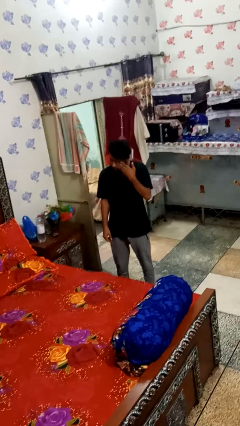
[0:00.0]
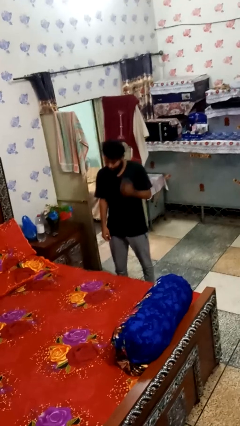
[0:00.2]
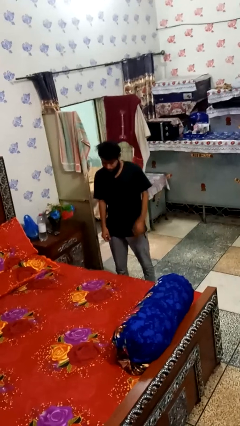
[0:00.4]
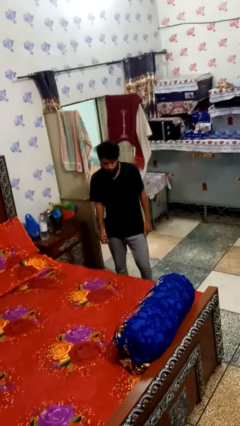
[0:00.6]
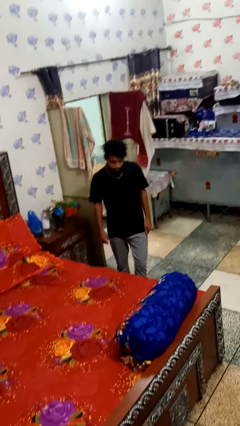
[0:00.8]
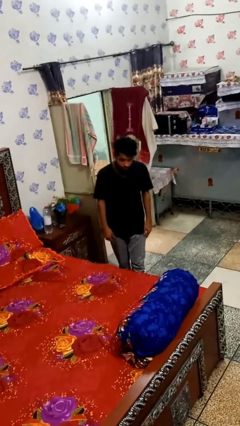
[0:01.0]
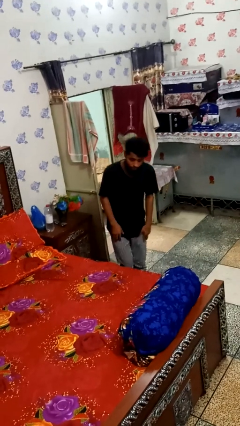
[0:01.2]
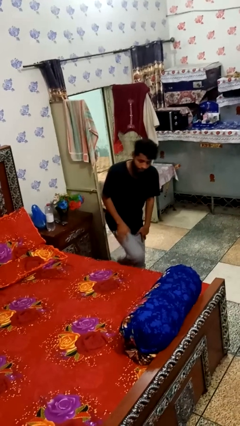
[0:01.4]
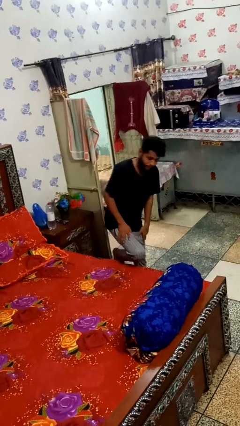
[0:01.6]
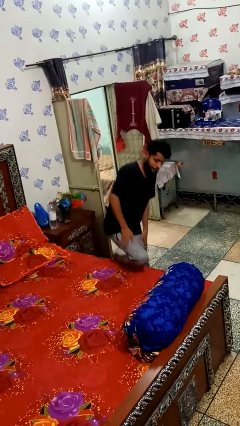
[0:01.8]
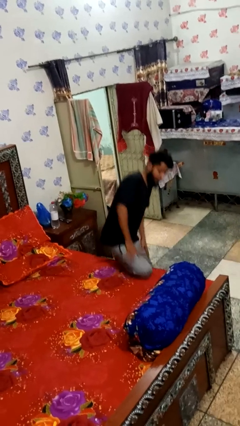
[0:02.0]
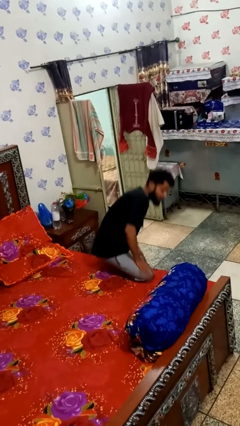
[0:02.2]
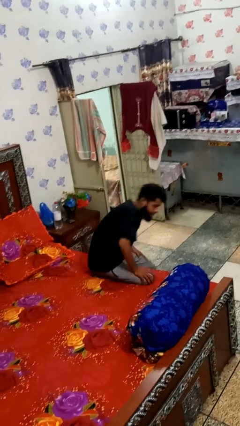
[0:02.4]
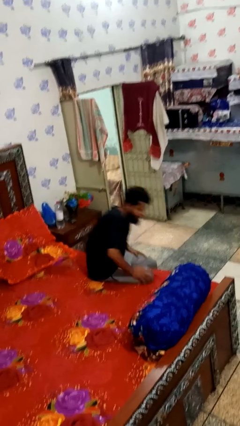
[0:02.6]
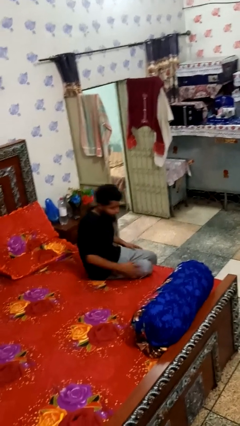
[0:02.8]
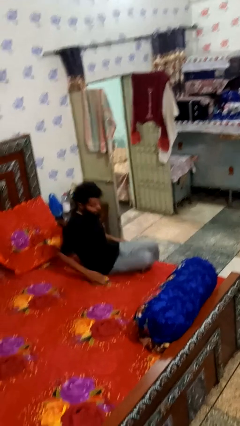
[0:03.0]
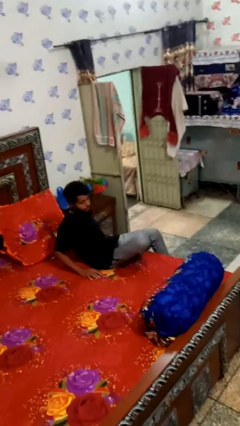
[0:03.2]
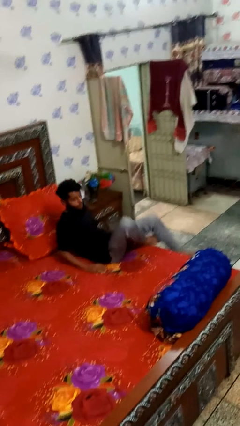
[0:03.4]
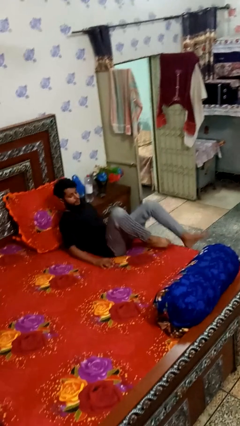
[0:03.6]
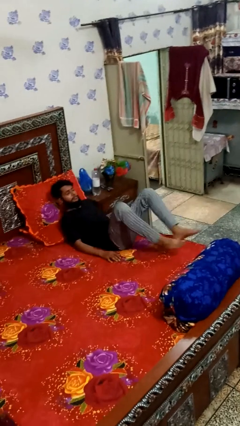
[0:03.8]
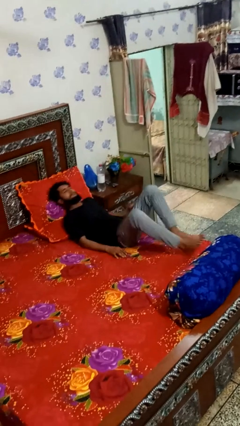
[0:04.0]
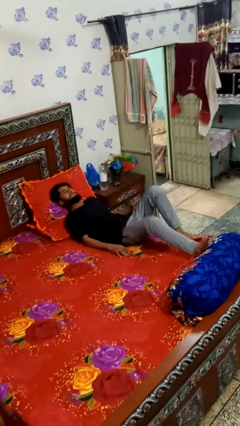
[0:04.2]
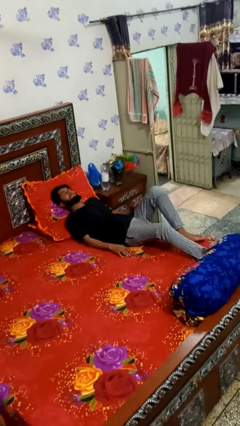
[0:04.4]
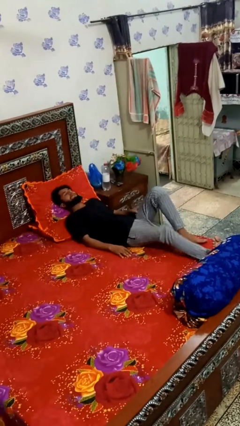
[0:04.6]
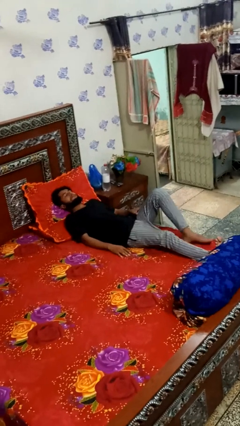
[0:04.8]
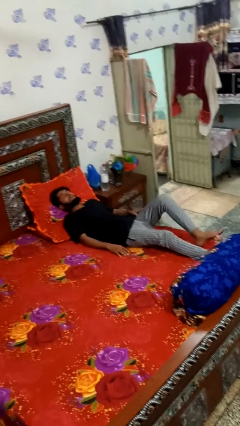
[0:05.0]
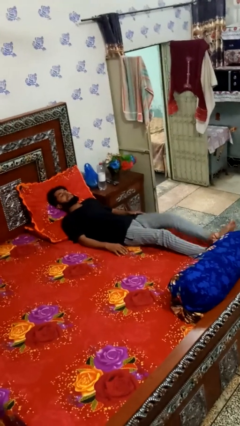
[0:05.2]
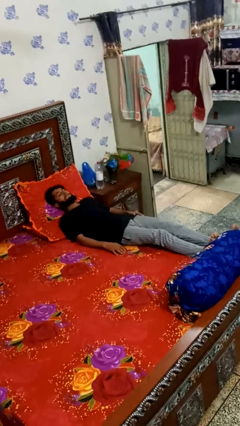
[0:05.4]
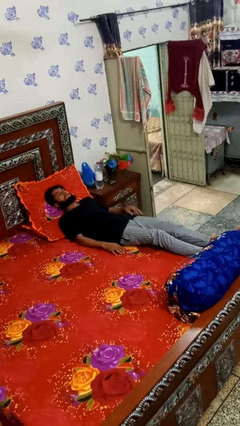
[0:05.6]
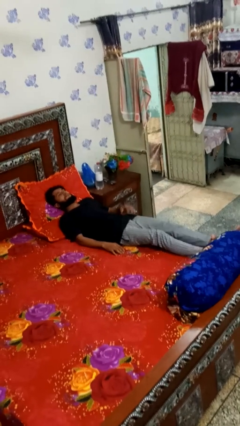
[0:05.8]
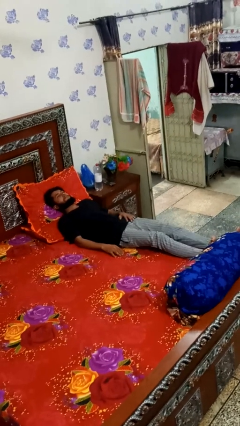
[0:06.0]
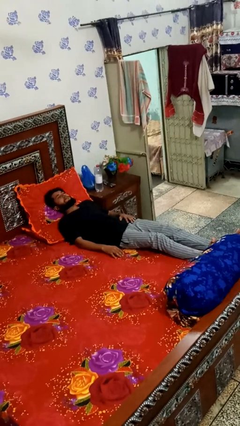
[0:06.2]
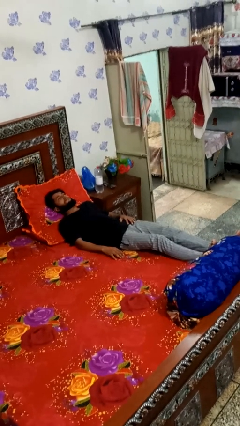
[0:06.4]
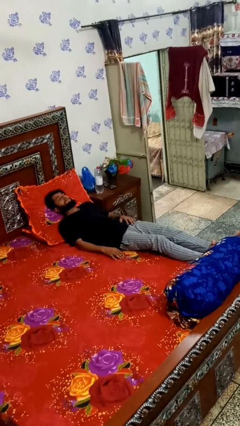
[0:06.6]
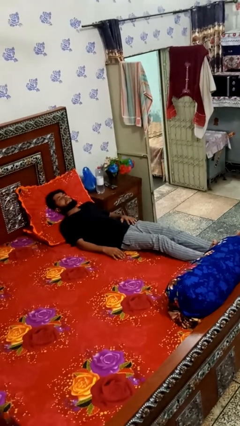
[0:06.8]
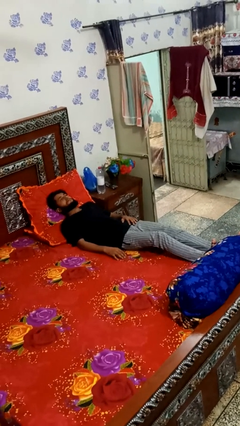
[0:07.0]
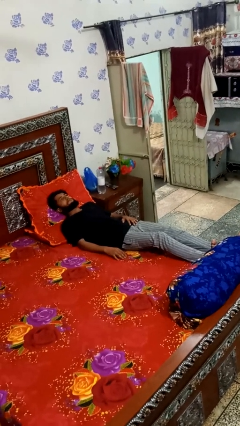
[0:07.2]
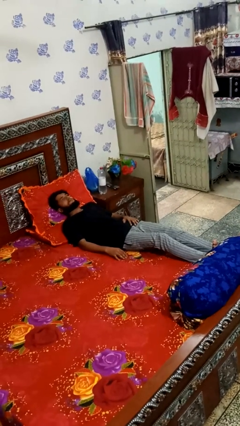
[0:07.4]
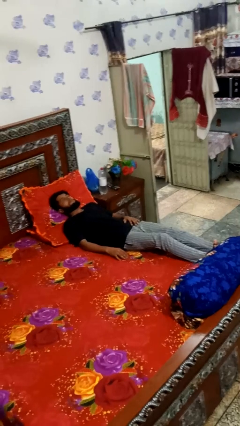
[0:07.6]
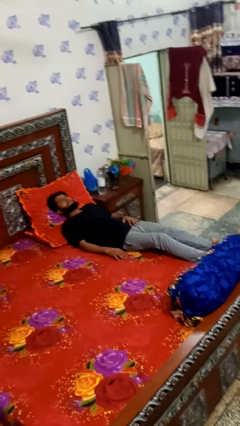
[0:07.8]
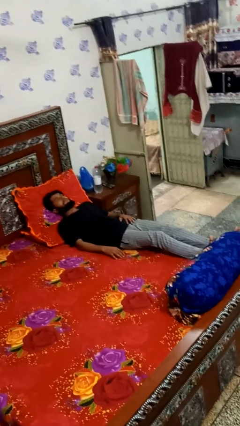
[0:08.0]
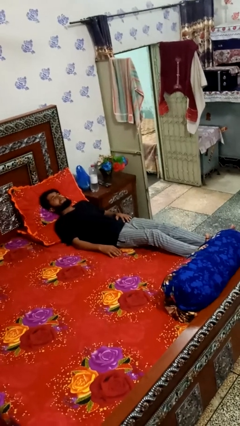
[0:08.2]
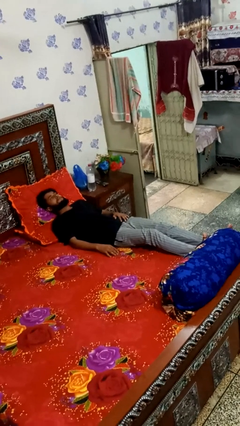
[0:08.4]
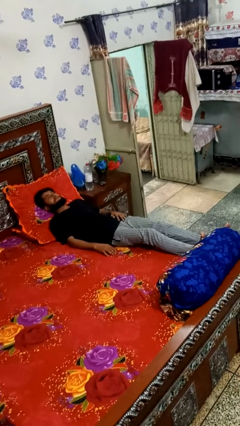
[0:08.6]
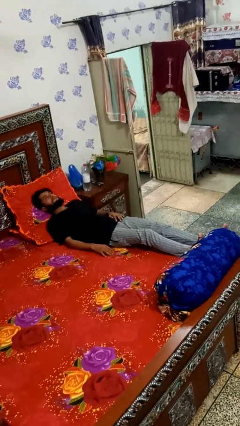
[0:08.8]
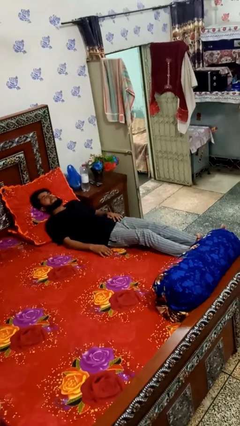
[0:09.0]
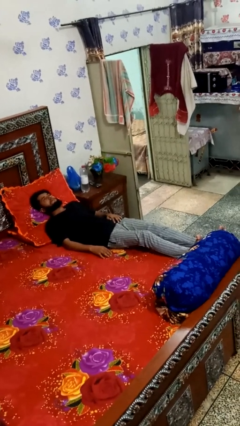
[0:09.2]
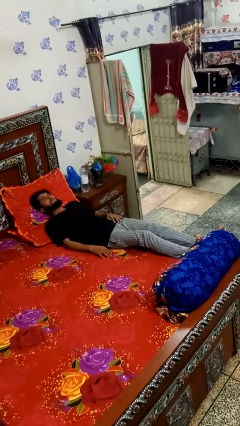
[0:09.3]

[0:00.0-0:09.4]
person lies down on bed

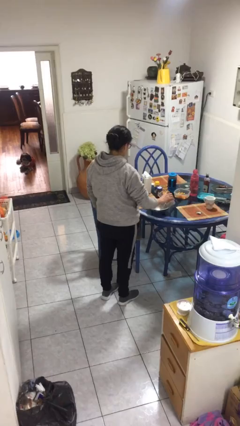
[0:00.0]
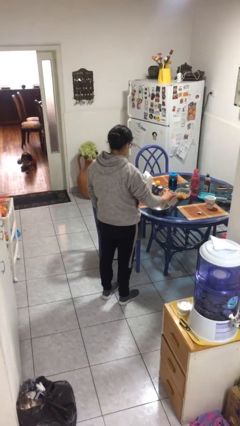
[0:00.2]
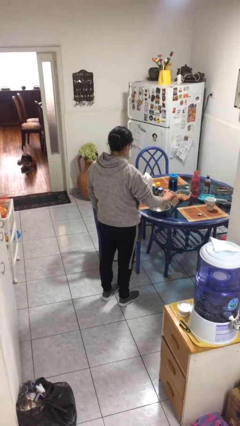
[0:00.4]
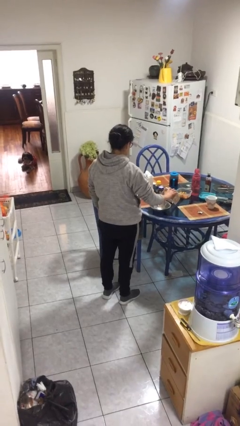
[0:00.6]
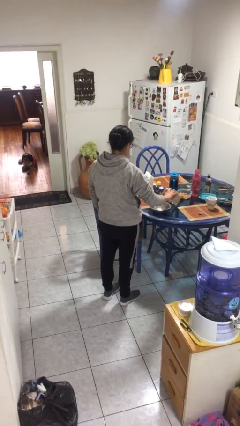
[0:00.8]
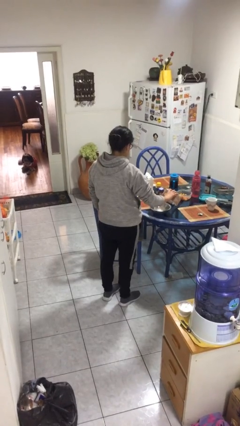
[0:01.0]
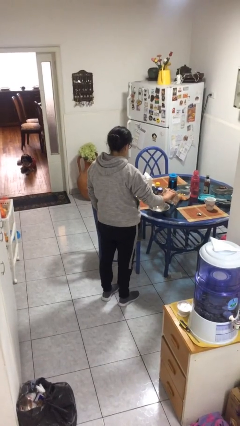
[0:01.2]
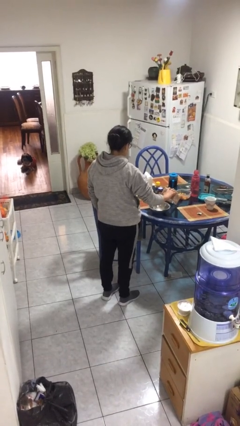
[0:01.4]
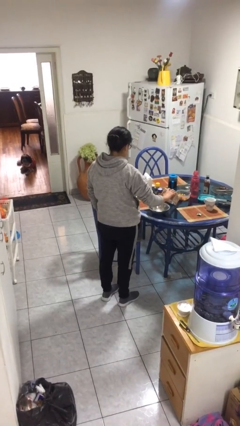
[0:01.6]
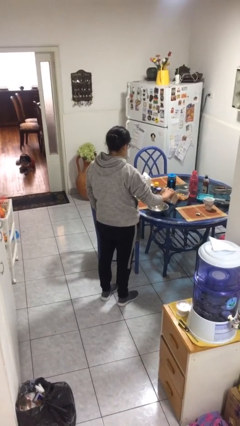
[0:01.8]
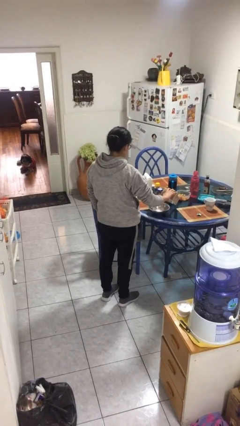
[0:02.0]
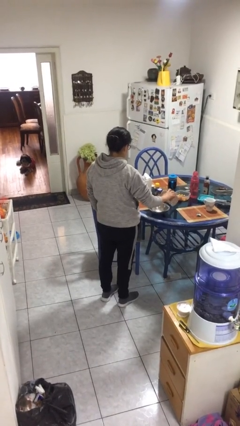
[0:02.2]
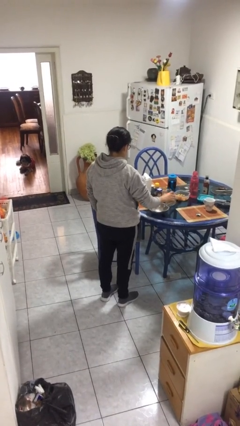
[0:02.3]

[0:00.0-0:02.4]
person pours into bowl

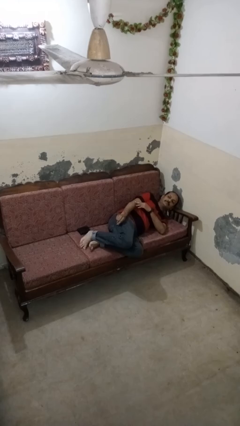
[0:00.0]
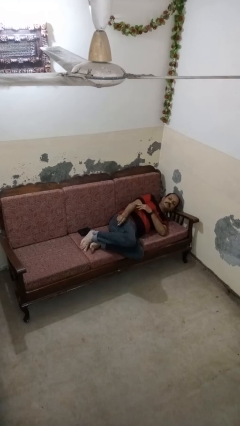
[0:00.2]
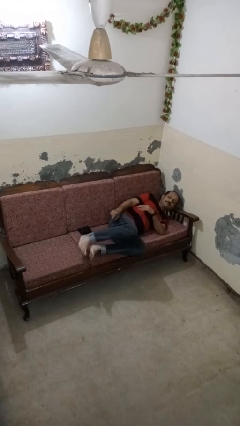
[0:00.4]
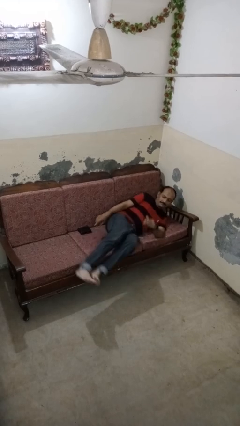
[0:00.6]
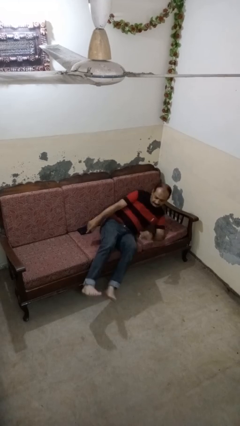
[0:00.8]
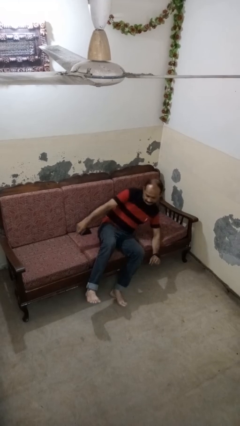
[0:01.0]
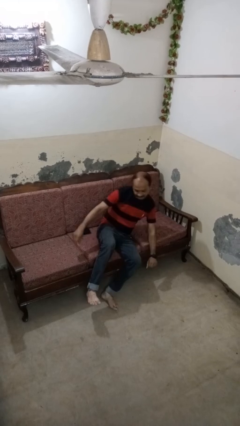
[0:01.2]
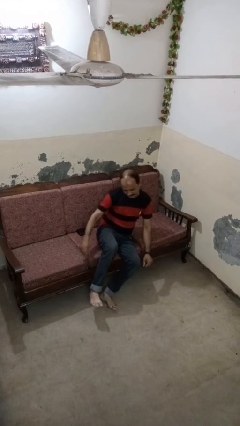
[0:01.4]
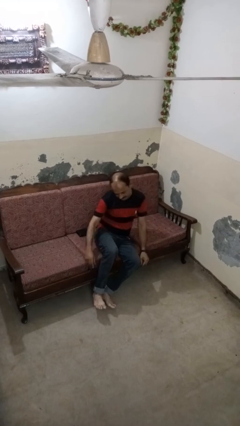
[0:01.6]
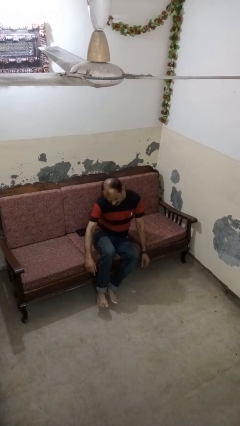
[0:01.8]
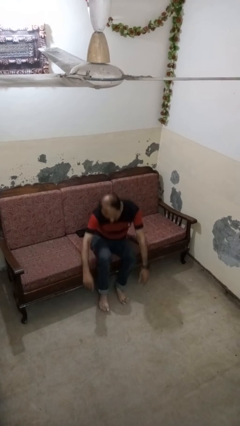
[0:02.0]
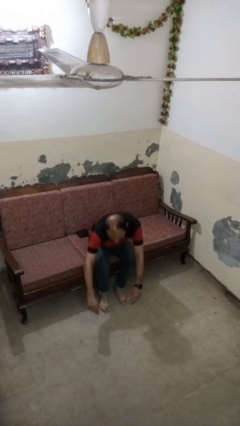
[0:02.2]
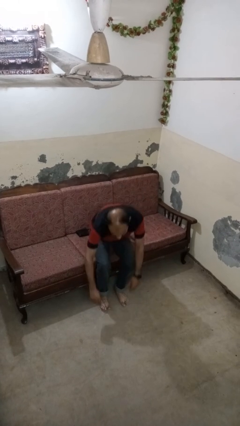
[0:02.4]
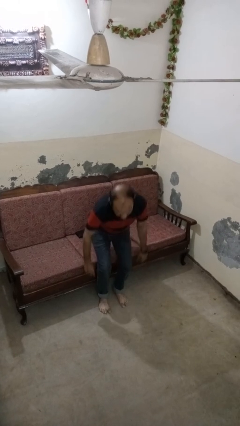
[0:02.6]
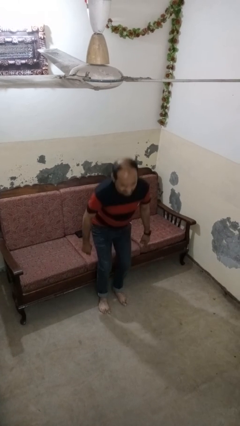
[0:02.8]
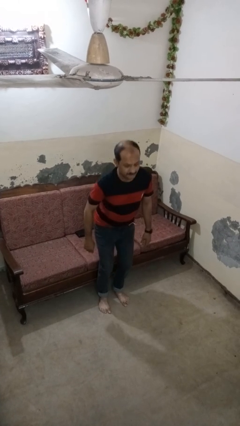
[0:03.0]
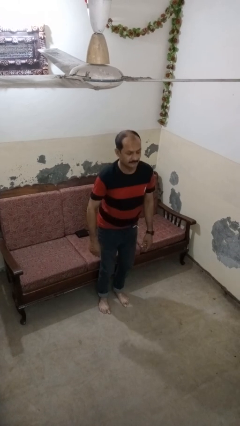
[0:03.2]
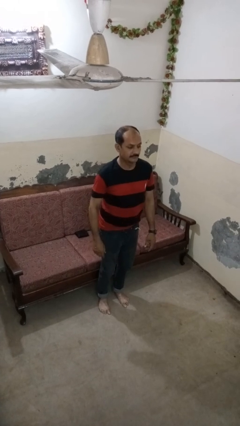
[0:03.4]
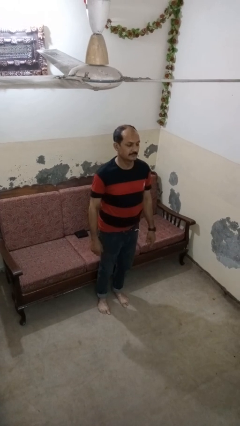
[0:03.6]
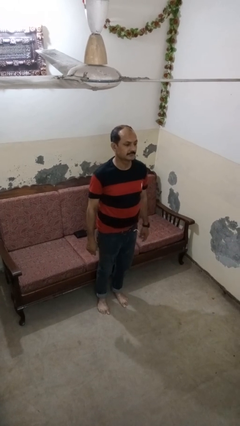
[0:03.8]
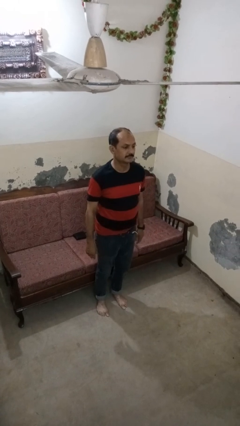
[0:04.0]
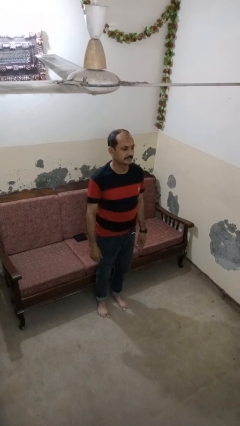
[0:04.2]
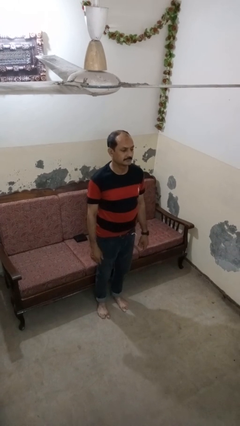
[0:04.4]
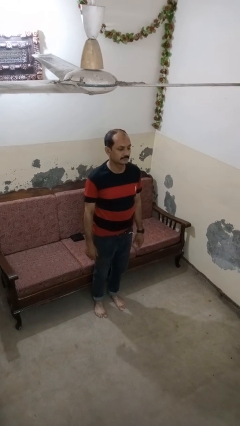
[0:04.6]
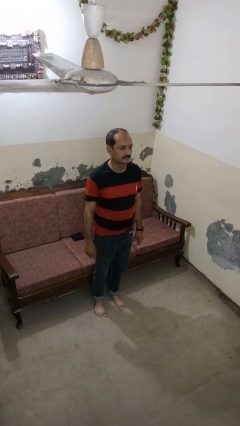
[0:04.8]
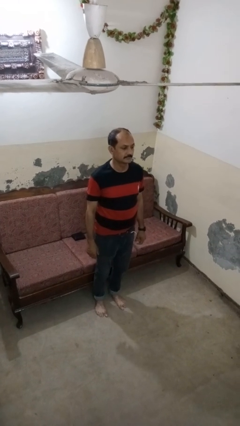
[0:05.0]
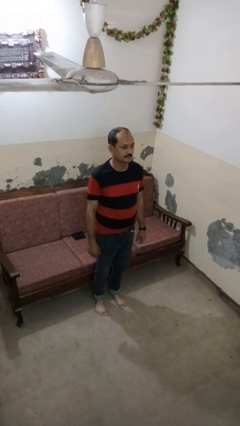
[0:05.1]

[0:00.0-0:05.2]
person stands up

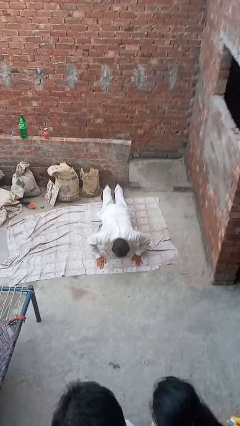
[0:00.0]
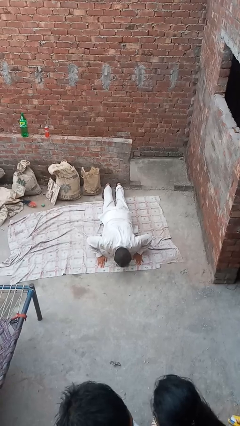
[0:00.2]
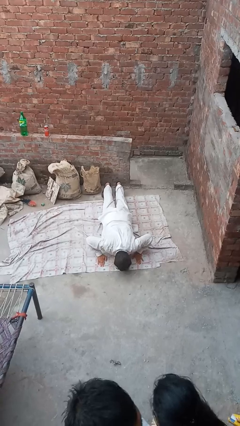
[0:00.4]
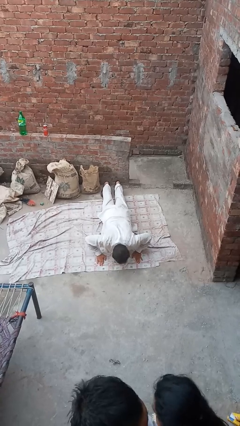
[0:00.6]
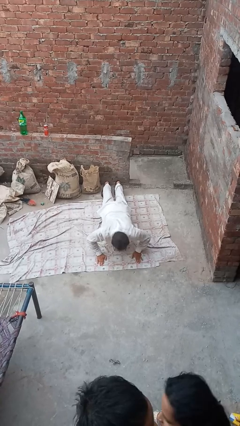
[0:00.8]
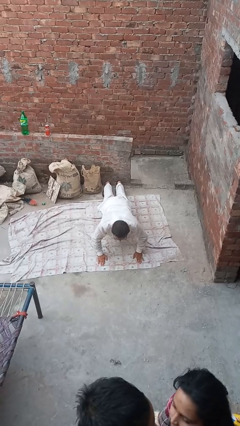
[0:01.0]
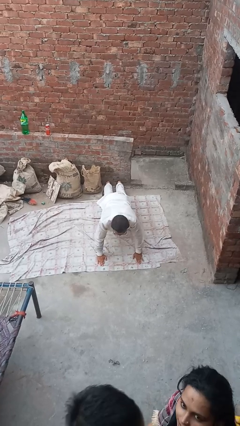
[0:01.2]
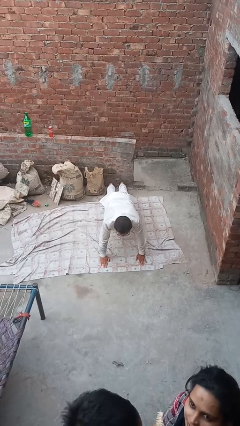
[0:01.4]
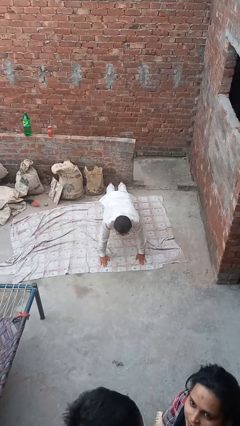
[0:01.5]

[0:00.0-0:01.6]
person exercises with pushup
